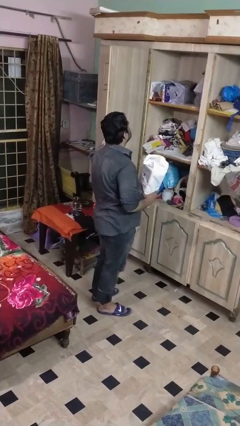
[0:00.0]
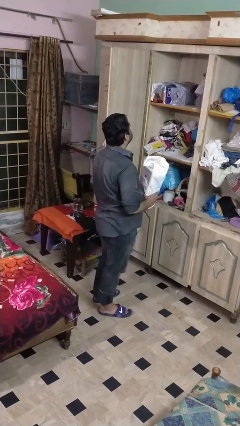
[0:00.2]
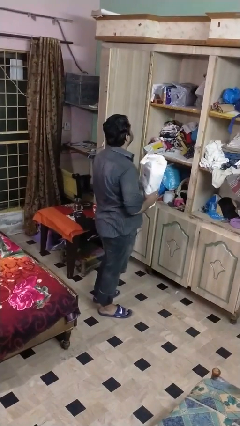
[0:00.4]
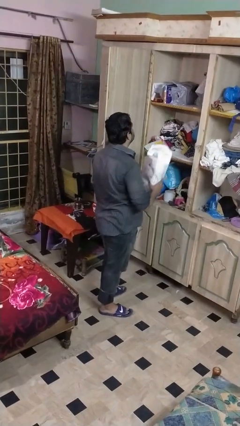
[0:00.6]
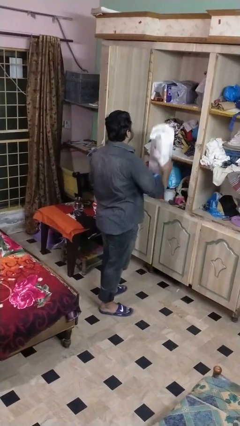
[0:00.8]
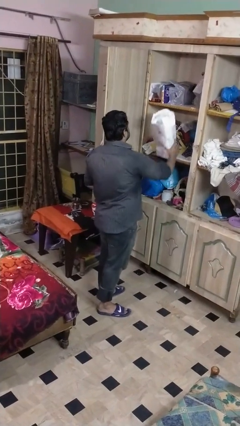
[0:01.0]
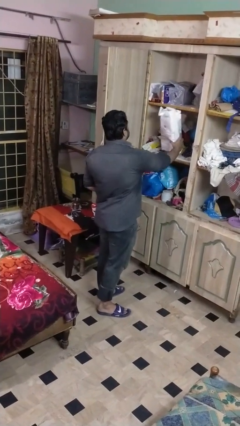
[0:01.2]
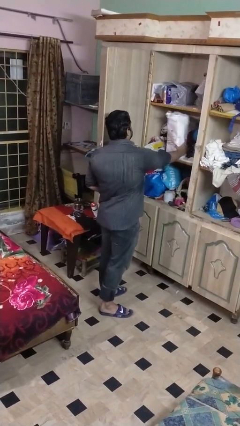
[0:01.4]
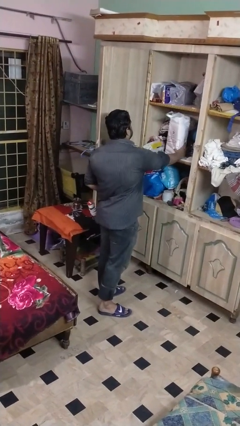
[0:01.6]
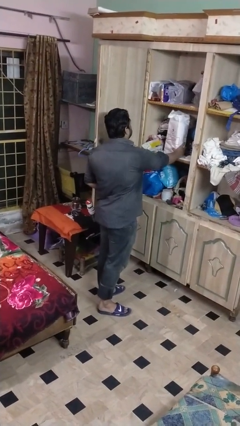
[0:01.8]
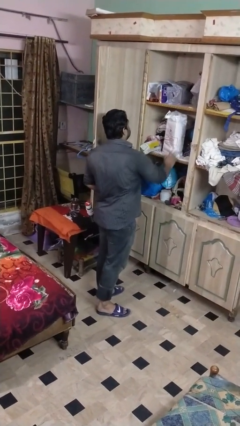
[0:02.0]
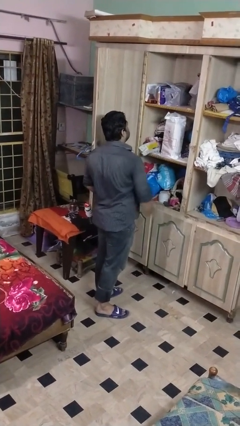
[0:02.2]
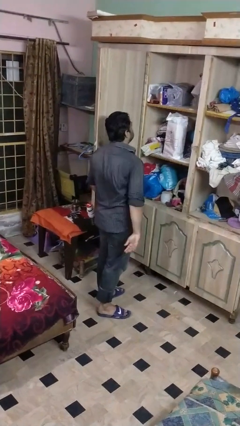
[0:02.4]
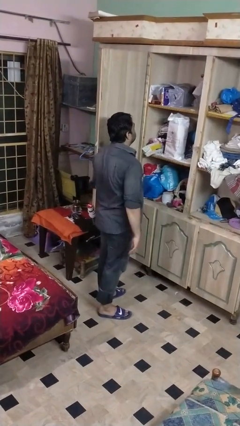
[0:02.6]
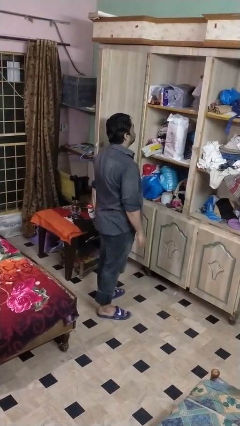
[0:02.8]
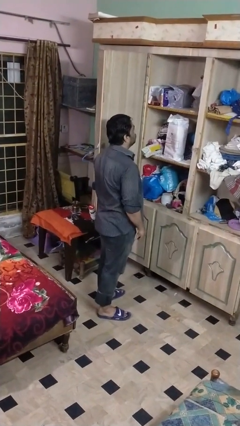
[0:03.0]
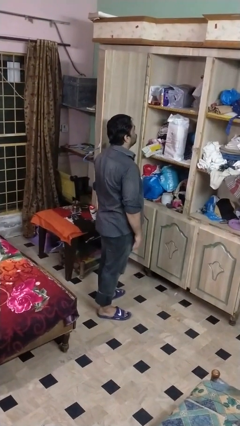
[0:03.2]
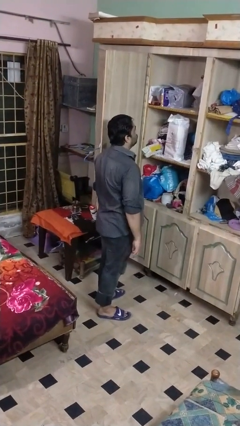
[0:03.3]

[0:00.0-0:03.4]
person puts down object into cabinet

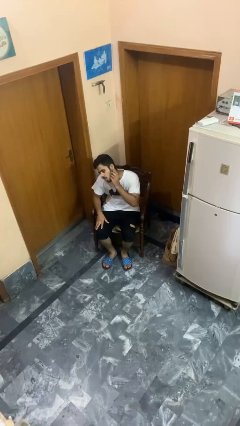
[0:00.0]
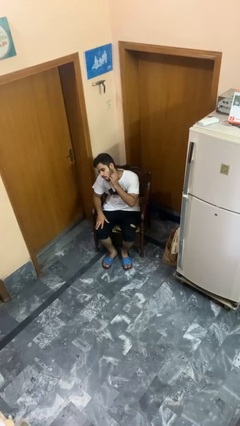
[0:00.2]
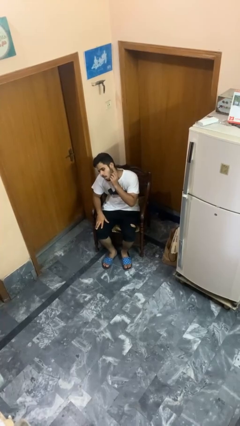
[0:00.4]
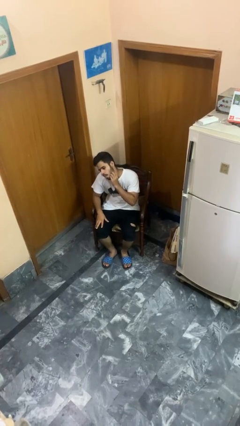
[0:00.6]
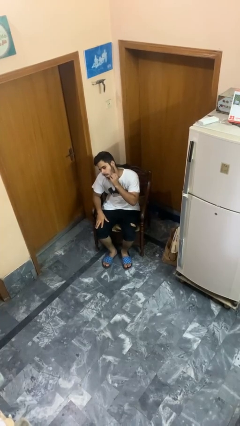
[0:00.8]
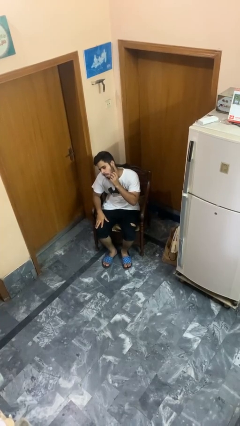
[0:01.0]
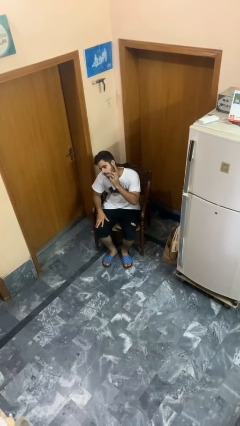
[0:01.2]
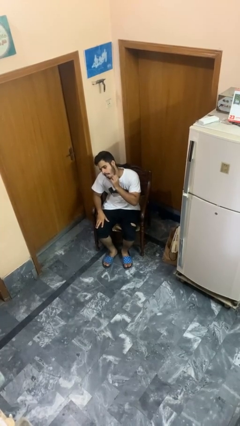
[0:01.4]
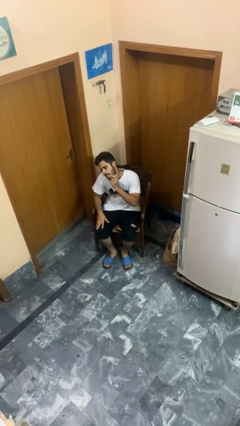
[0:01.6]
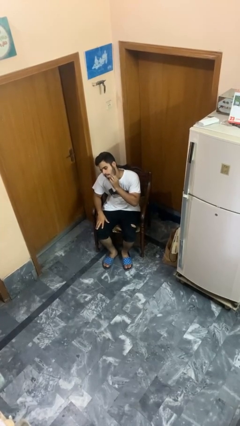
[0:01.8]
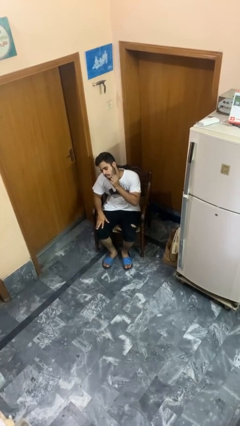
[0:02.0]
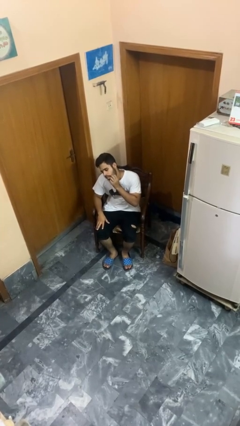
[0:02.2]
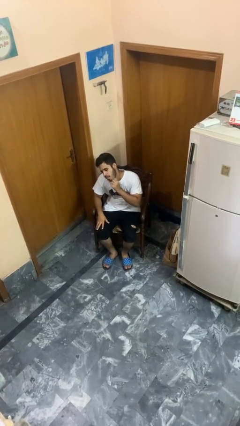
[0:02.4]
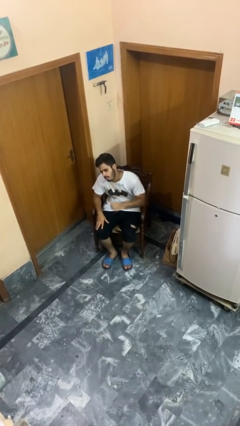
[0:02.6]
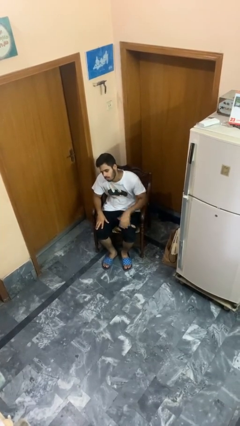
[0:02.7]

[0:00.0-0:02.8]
person scratches face

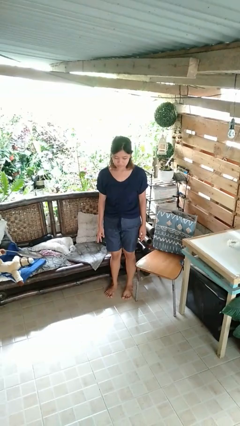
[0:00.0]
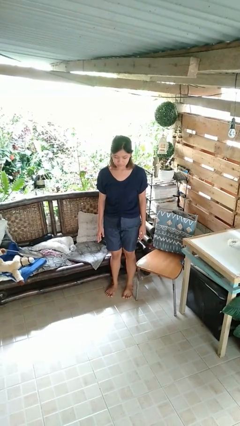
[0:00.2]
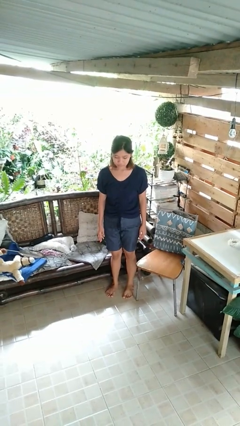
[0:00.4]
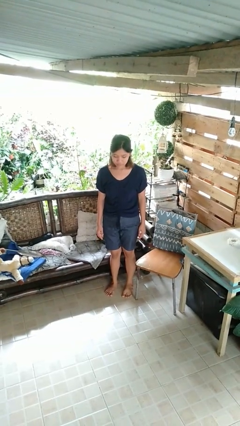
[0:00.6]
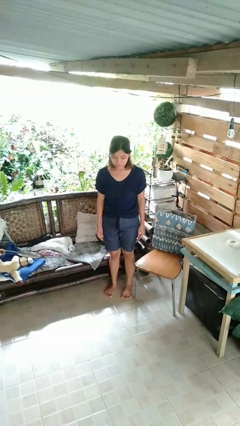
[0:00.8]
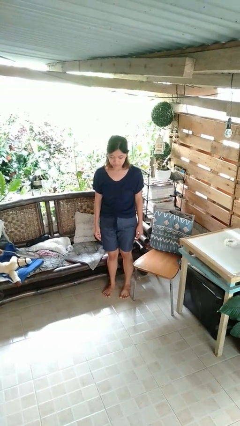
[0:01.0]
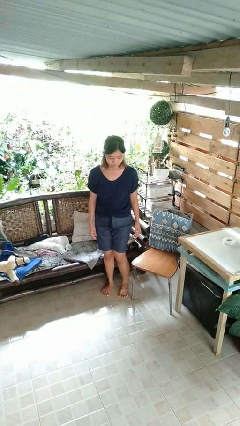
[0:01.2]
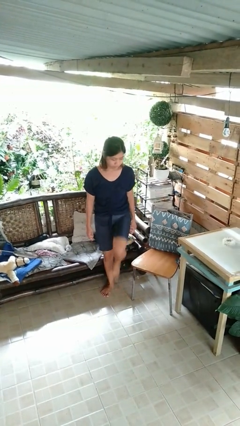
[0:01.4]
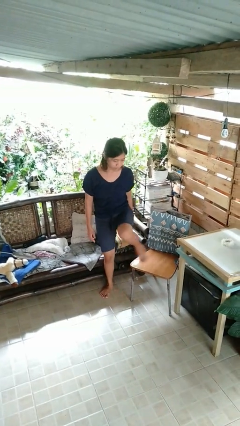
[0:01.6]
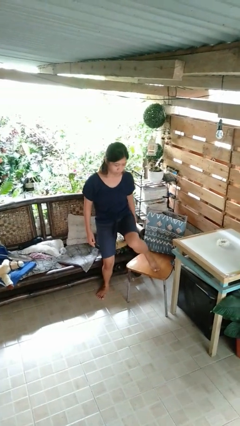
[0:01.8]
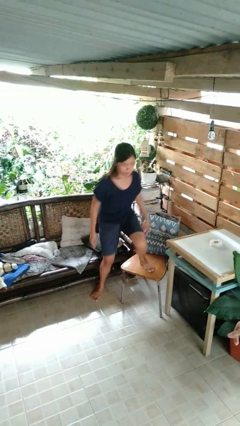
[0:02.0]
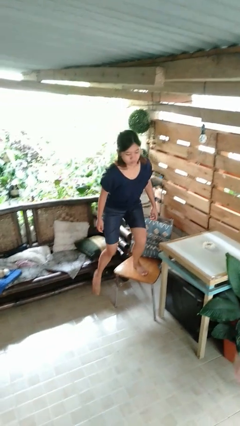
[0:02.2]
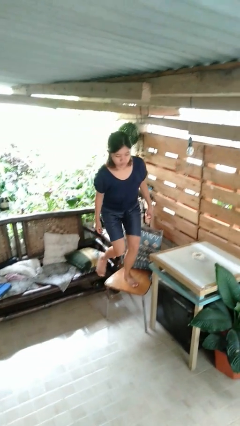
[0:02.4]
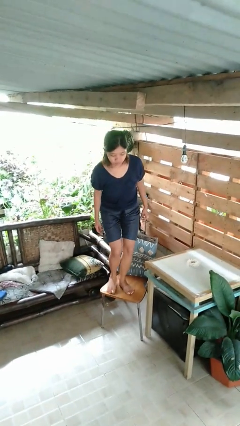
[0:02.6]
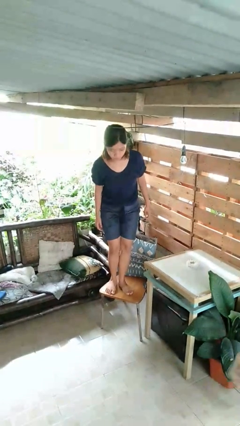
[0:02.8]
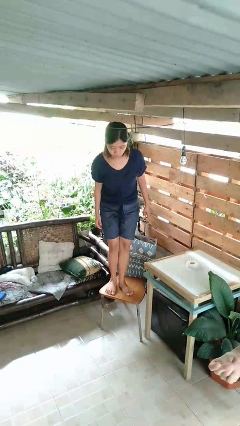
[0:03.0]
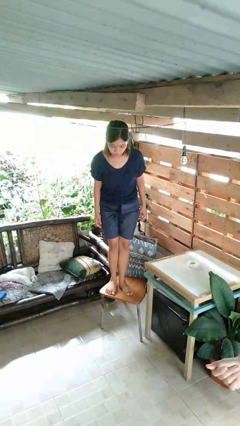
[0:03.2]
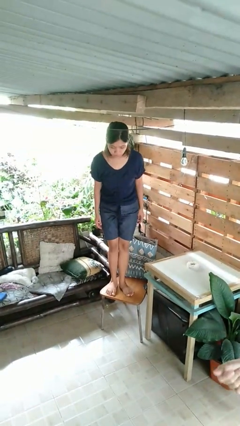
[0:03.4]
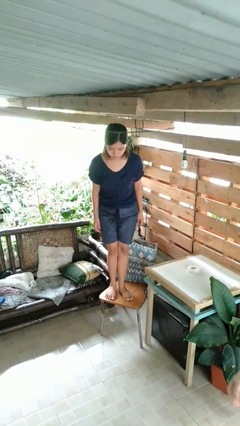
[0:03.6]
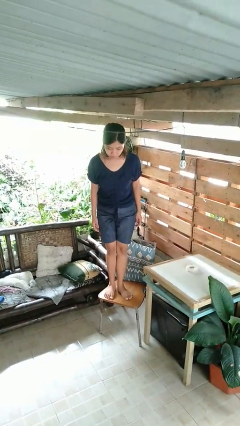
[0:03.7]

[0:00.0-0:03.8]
person climbs on chair

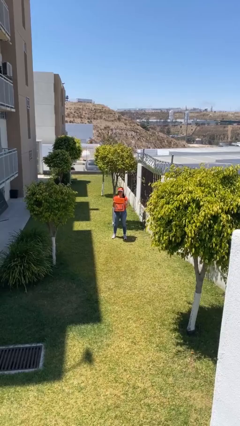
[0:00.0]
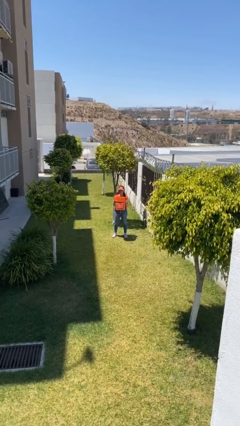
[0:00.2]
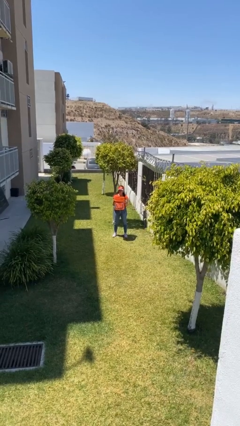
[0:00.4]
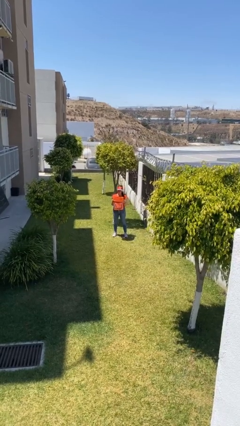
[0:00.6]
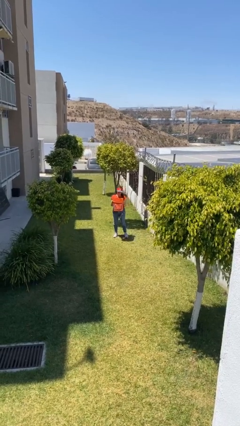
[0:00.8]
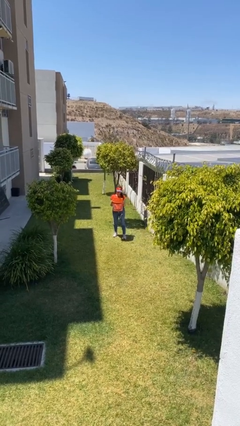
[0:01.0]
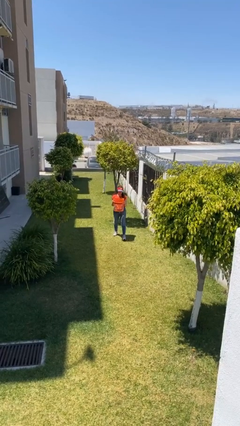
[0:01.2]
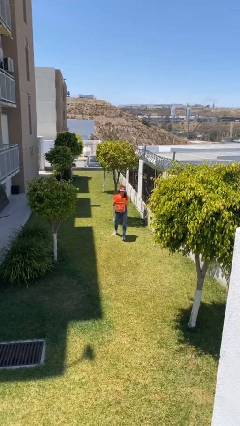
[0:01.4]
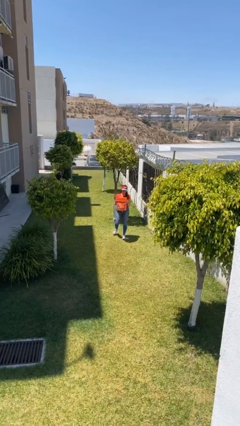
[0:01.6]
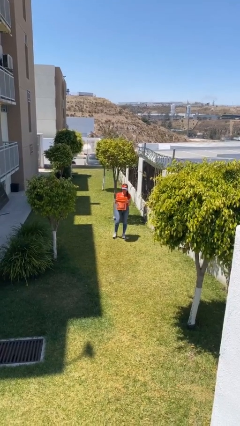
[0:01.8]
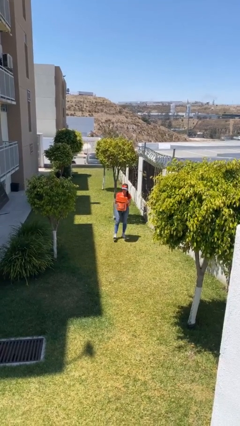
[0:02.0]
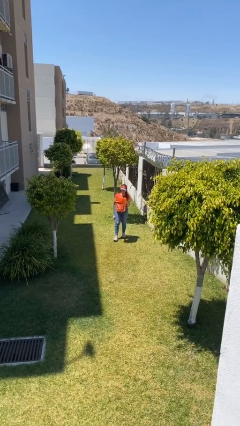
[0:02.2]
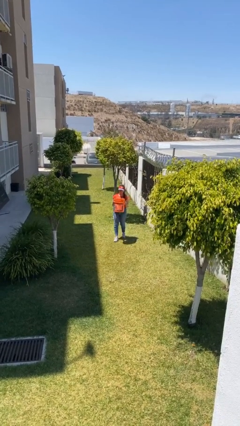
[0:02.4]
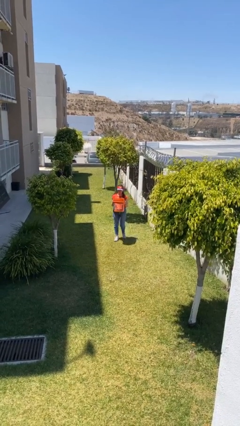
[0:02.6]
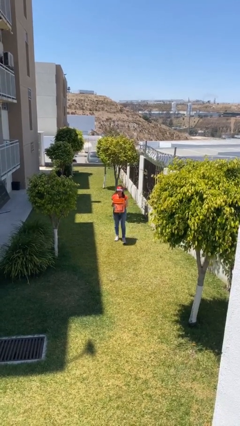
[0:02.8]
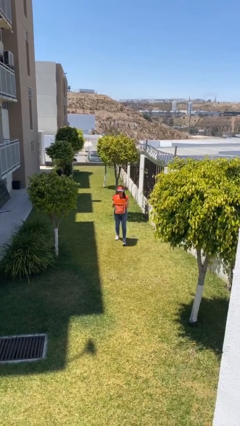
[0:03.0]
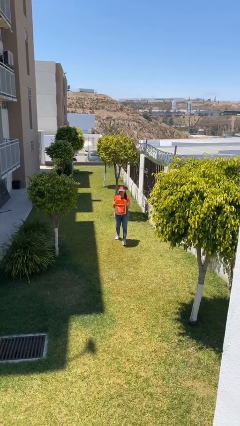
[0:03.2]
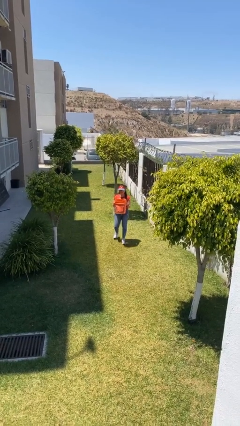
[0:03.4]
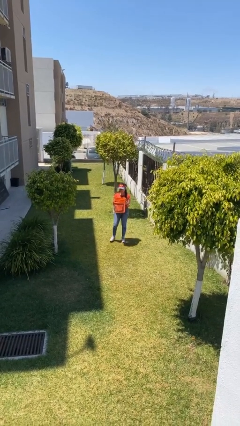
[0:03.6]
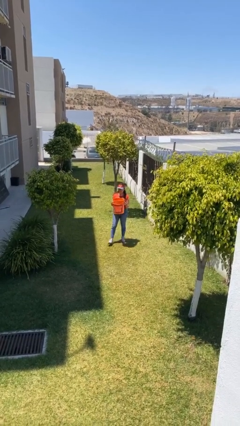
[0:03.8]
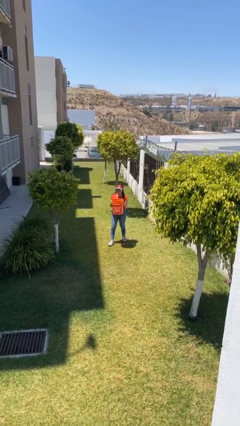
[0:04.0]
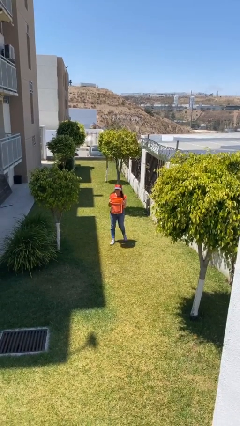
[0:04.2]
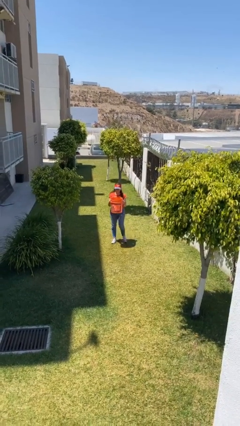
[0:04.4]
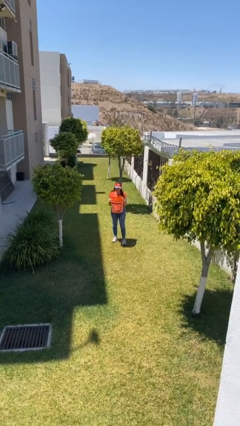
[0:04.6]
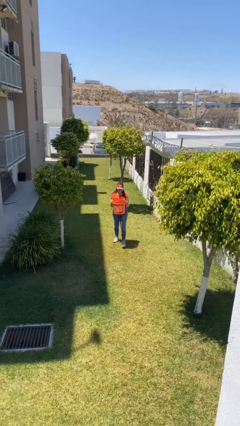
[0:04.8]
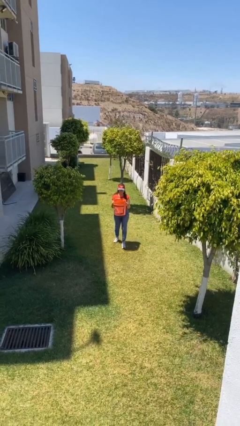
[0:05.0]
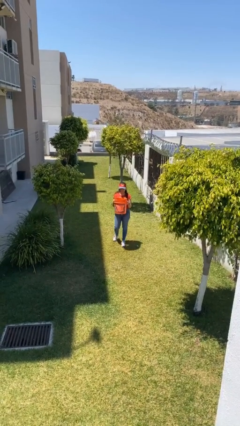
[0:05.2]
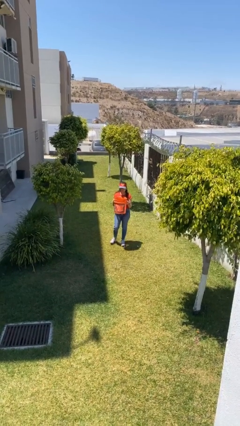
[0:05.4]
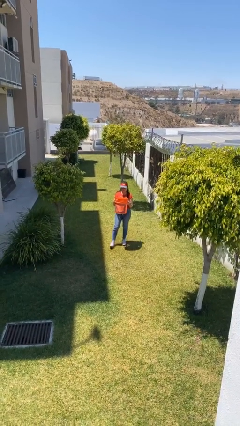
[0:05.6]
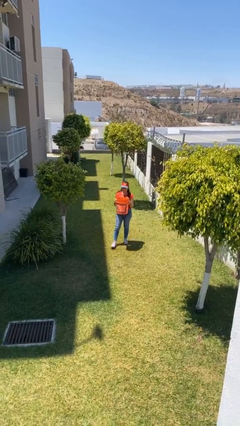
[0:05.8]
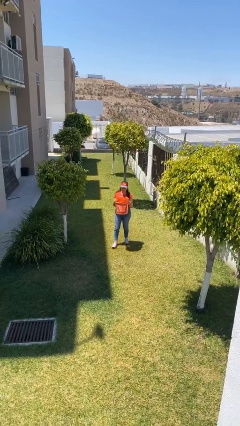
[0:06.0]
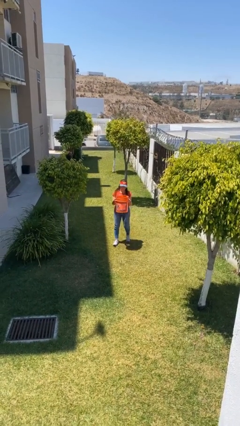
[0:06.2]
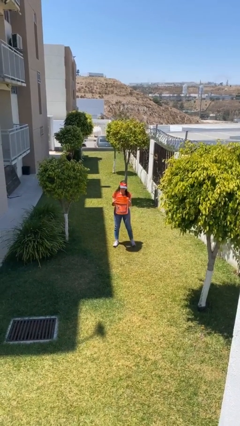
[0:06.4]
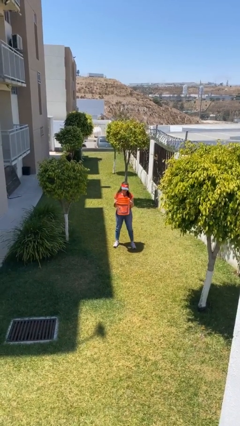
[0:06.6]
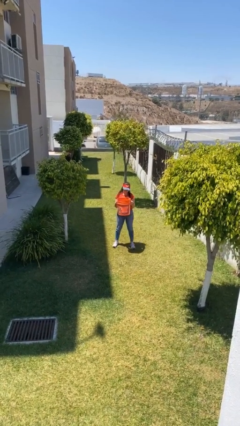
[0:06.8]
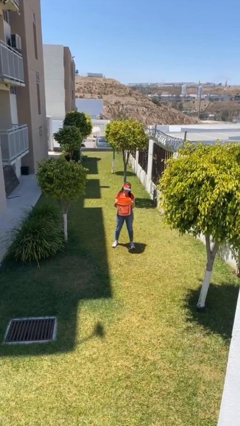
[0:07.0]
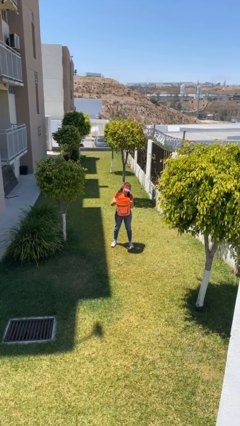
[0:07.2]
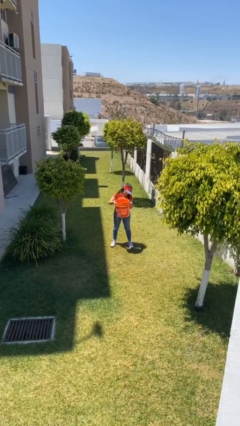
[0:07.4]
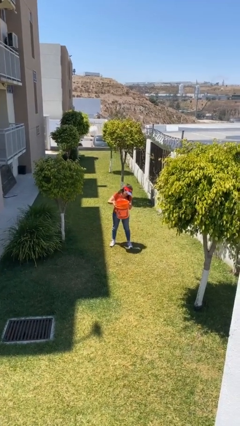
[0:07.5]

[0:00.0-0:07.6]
person carries heavy object

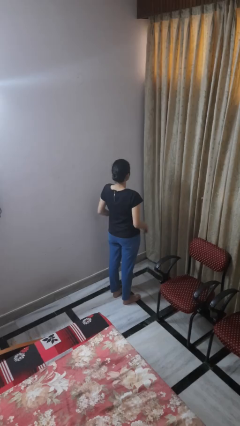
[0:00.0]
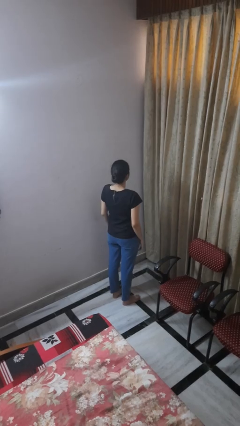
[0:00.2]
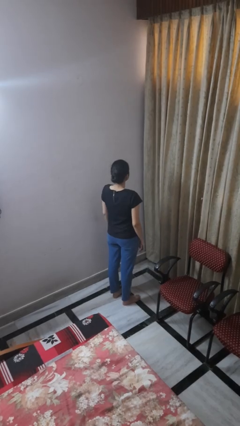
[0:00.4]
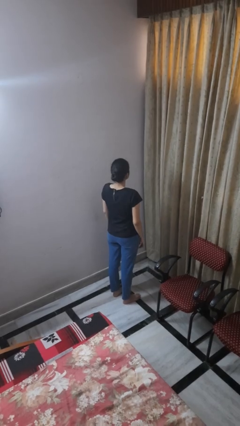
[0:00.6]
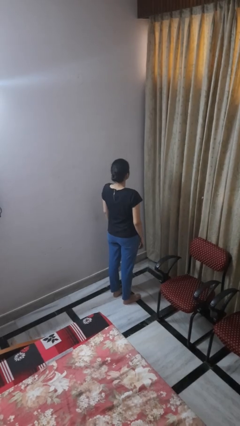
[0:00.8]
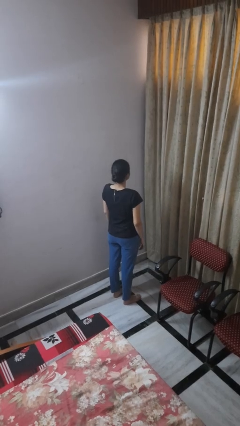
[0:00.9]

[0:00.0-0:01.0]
person takes off ring
